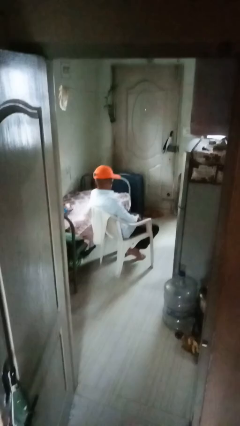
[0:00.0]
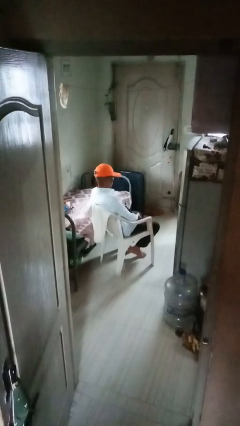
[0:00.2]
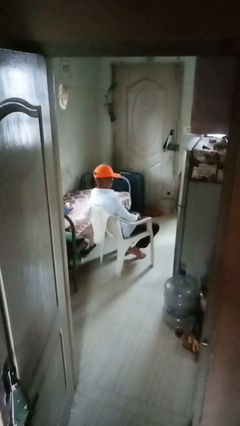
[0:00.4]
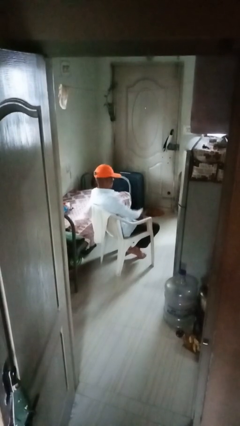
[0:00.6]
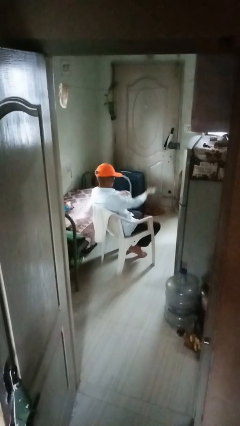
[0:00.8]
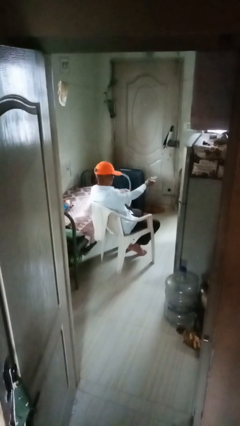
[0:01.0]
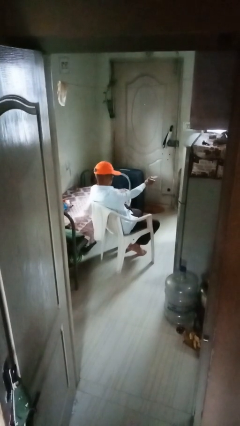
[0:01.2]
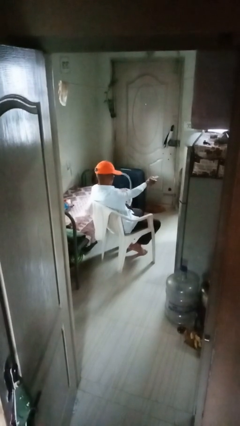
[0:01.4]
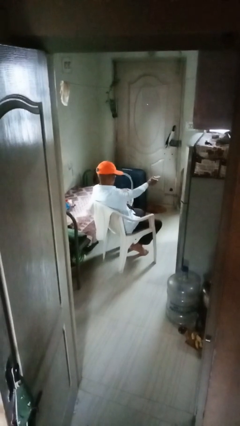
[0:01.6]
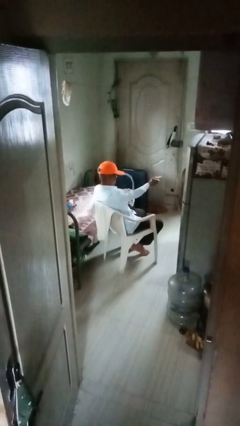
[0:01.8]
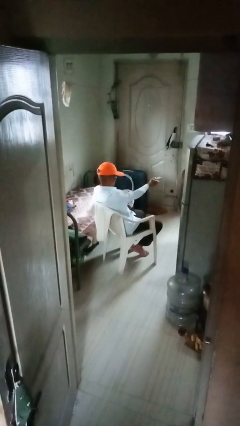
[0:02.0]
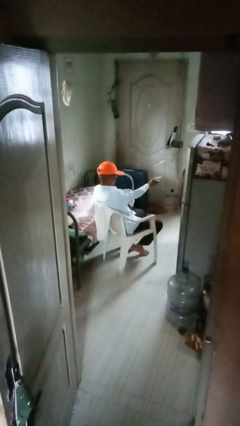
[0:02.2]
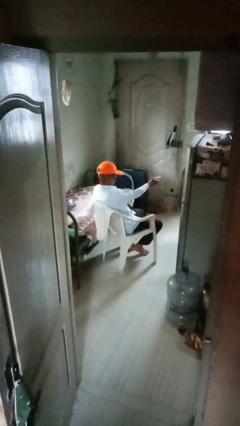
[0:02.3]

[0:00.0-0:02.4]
person uses television remote

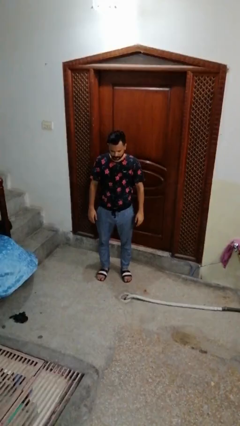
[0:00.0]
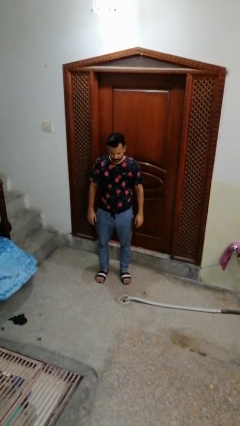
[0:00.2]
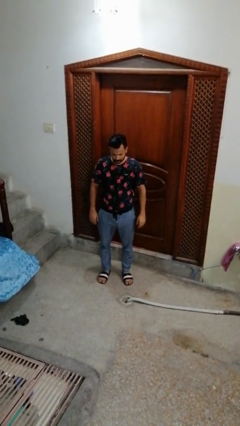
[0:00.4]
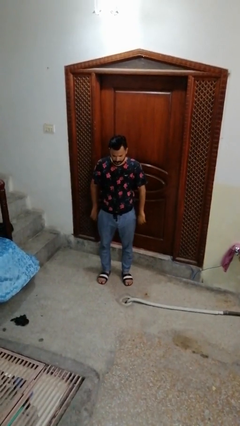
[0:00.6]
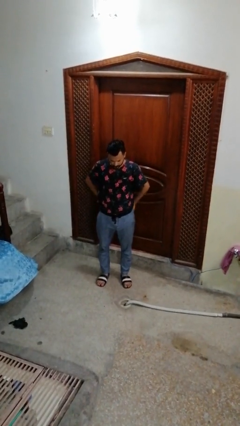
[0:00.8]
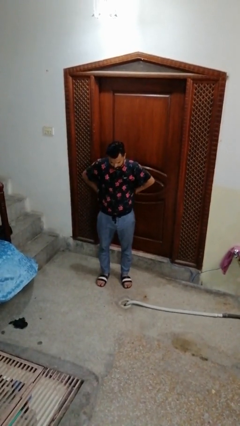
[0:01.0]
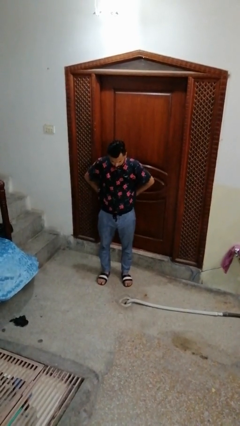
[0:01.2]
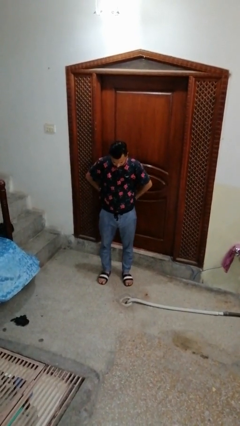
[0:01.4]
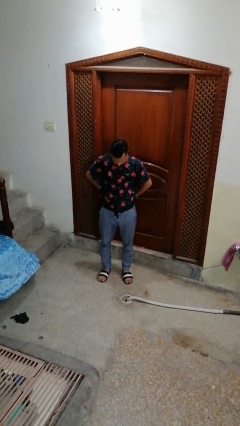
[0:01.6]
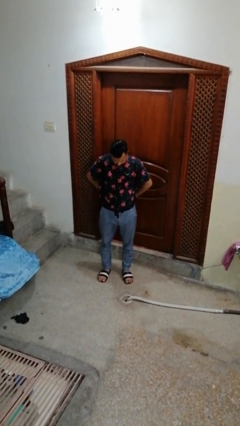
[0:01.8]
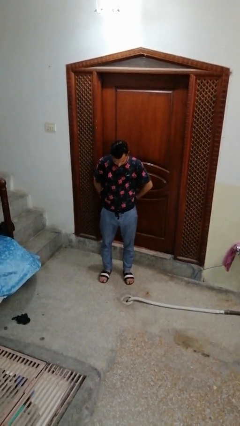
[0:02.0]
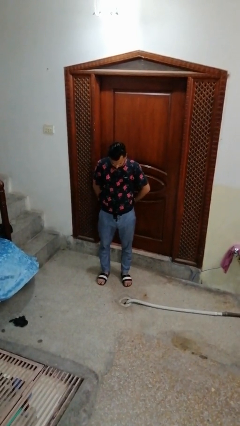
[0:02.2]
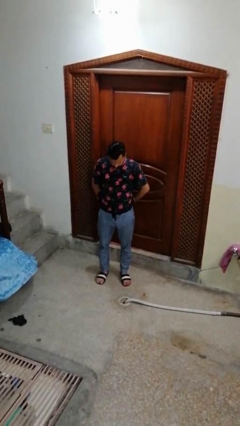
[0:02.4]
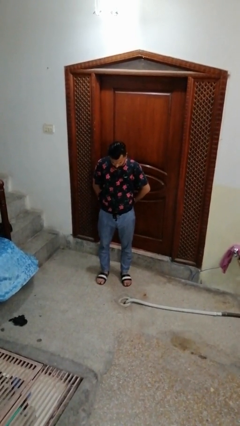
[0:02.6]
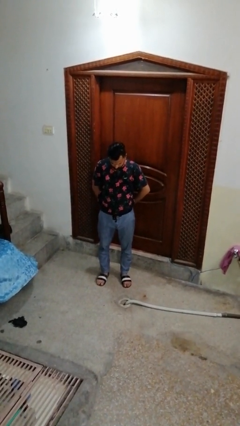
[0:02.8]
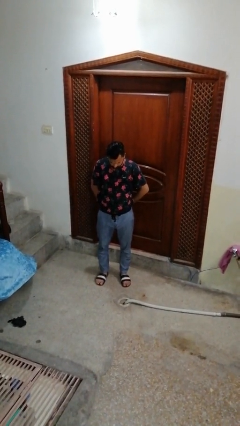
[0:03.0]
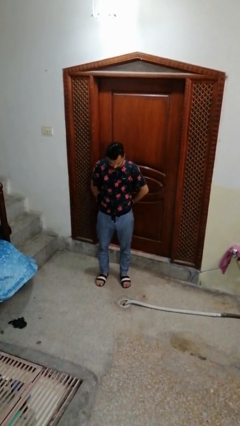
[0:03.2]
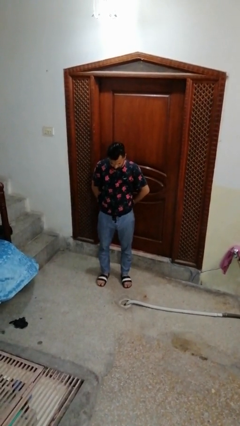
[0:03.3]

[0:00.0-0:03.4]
person puts hands in back pockets

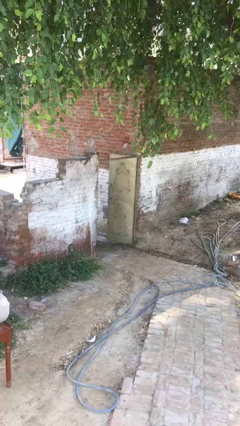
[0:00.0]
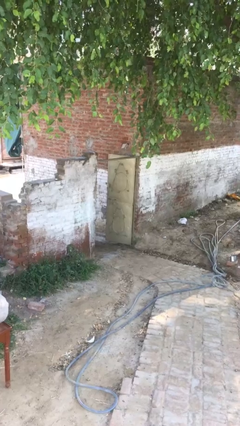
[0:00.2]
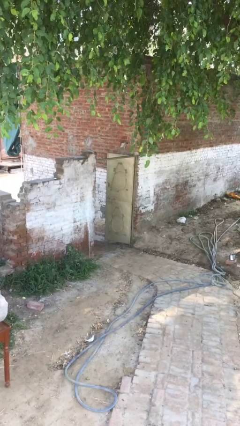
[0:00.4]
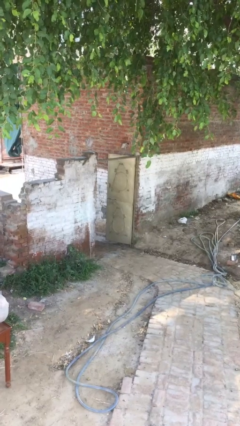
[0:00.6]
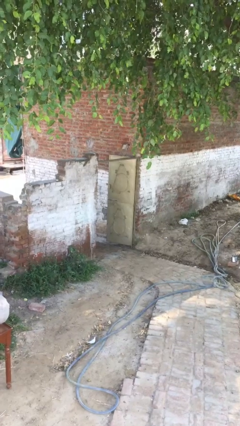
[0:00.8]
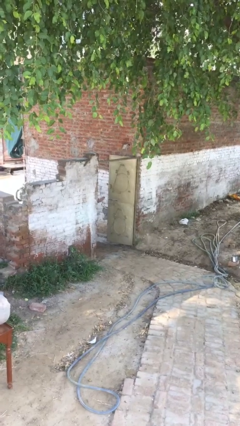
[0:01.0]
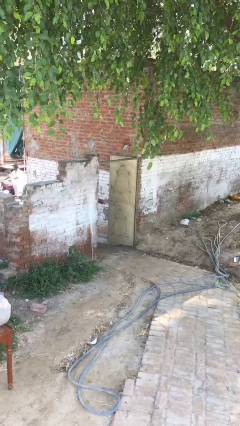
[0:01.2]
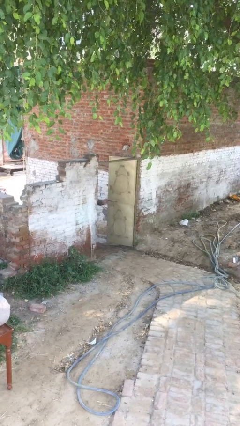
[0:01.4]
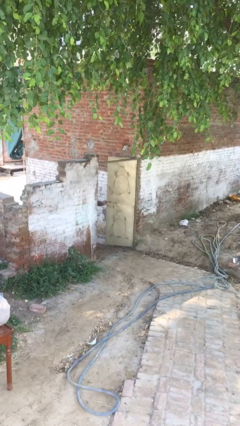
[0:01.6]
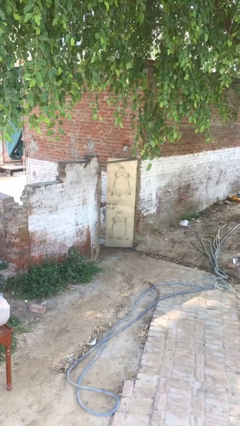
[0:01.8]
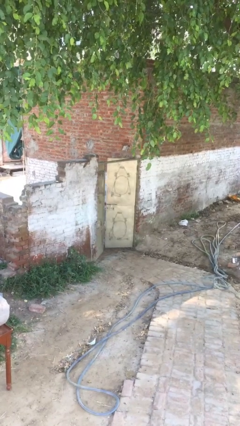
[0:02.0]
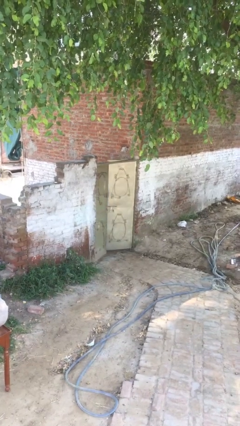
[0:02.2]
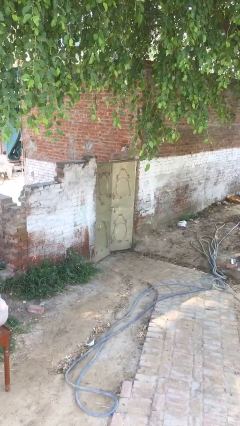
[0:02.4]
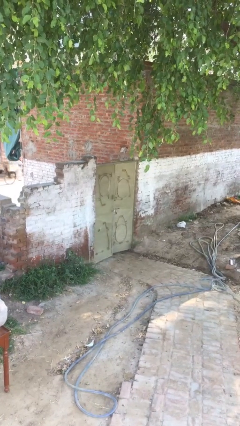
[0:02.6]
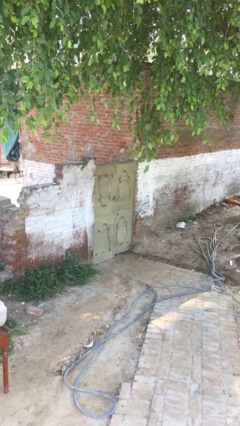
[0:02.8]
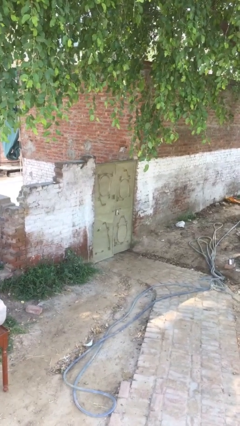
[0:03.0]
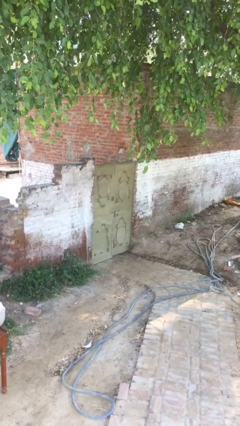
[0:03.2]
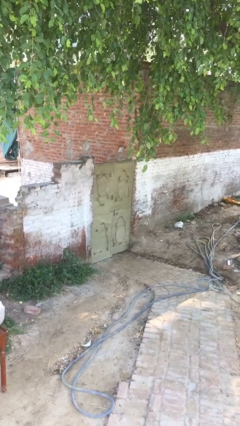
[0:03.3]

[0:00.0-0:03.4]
person closes facility door

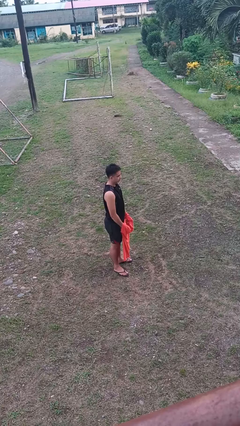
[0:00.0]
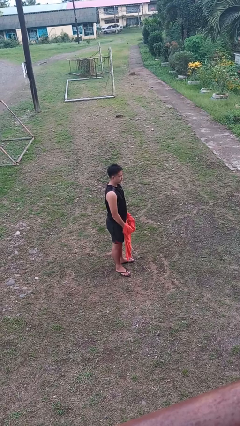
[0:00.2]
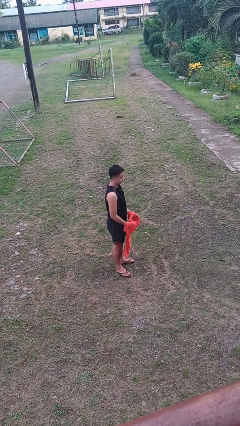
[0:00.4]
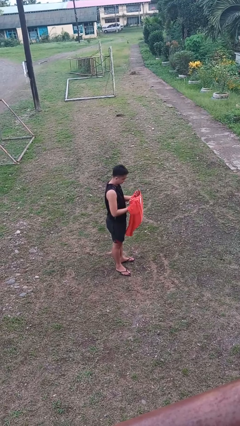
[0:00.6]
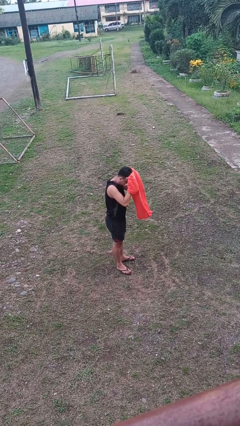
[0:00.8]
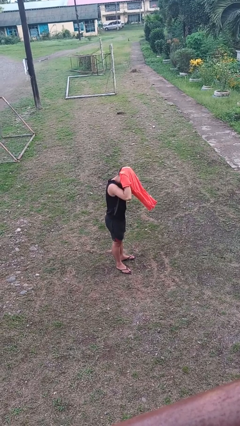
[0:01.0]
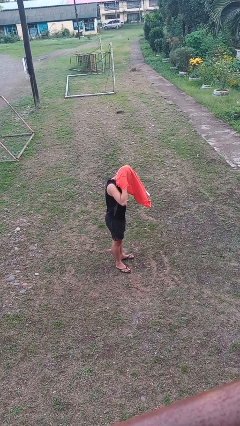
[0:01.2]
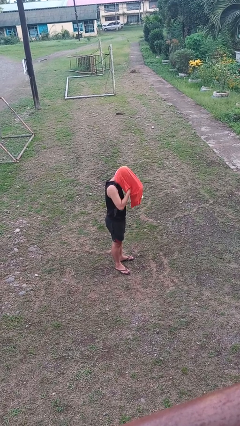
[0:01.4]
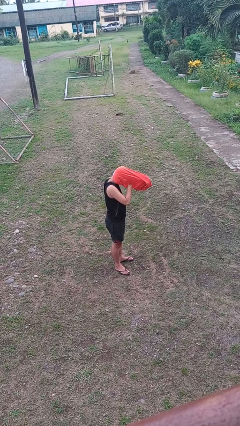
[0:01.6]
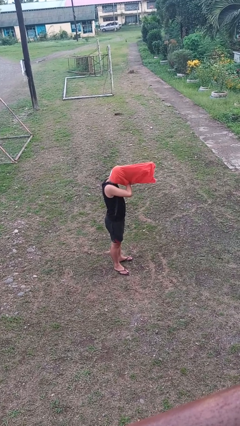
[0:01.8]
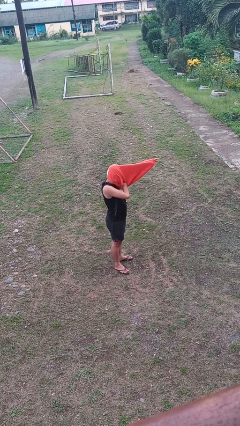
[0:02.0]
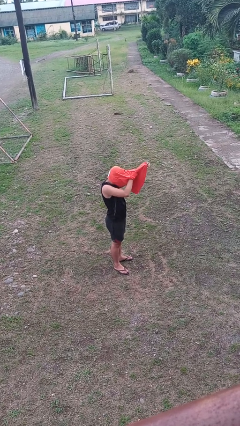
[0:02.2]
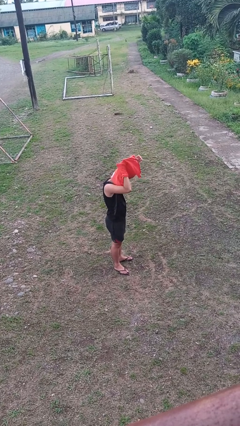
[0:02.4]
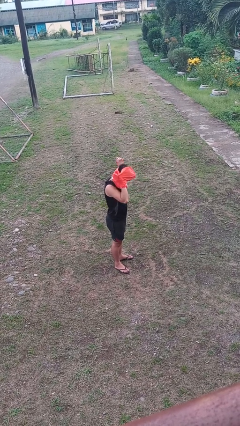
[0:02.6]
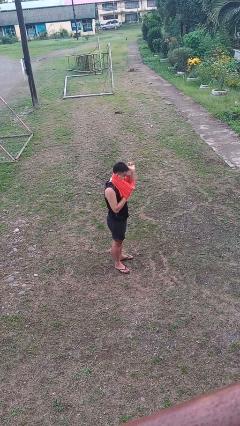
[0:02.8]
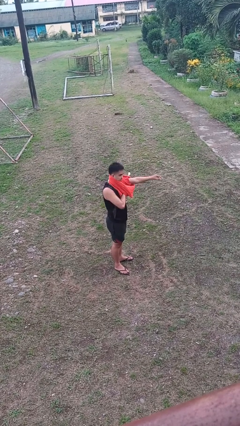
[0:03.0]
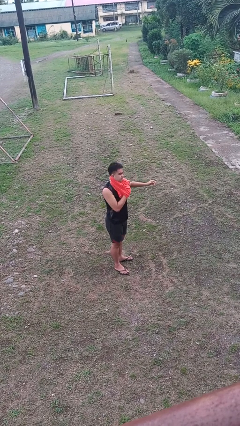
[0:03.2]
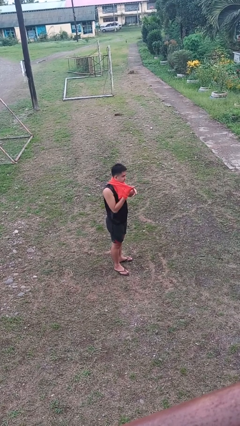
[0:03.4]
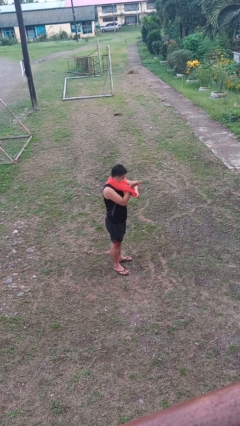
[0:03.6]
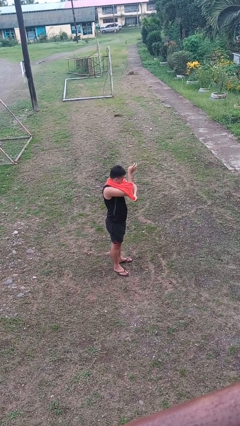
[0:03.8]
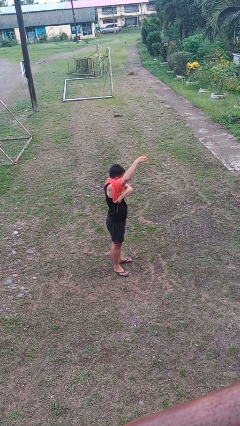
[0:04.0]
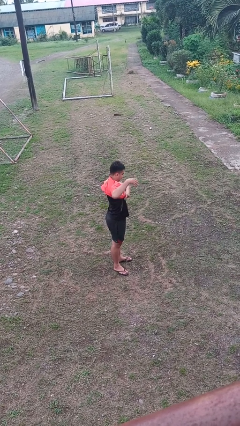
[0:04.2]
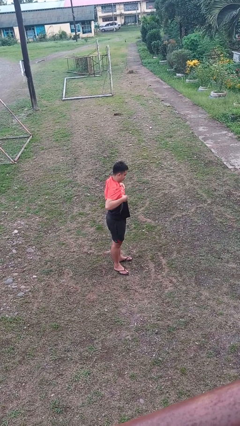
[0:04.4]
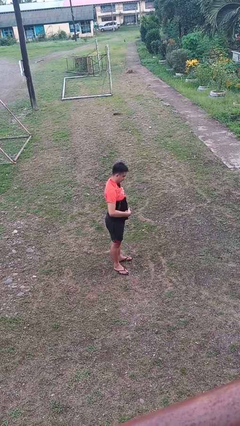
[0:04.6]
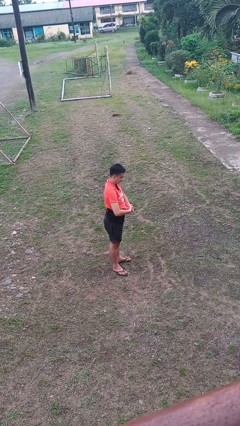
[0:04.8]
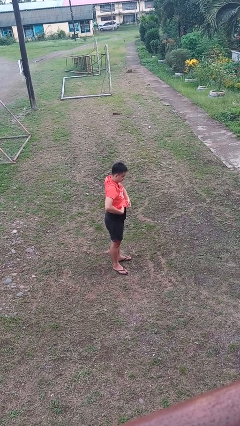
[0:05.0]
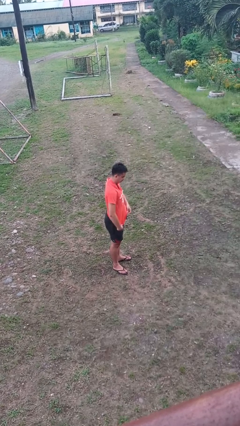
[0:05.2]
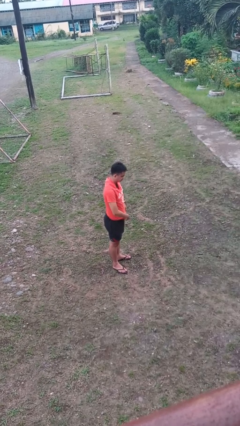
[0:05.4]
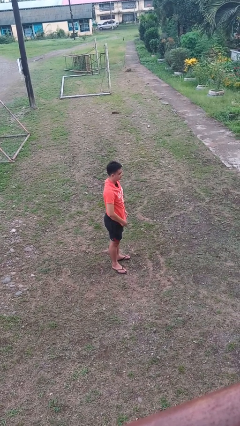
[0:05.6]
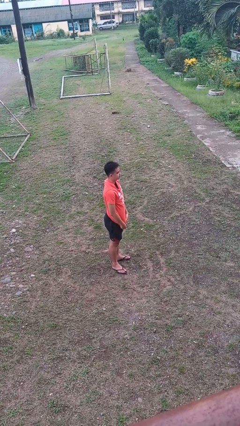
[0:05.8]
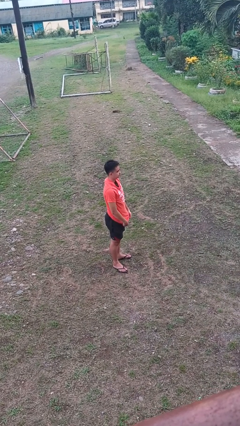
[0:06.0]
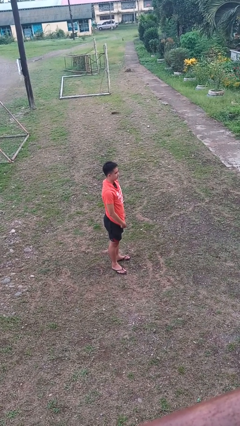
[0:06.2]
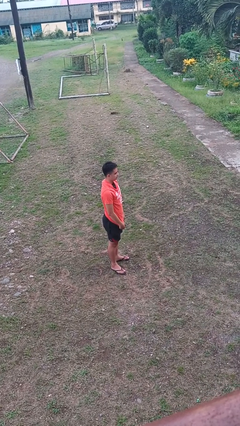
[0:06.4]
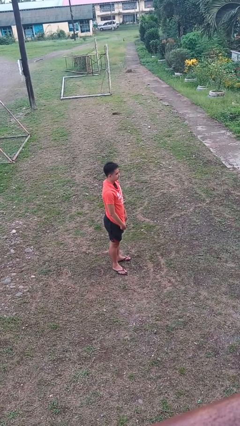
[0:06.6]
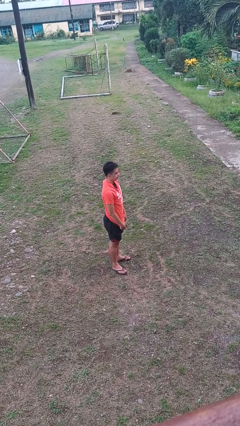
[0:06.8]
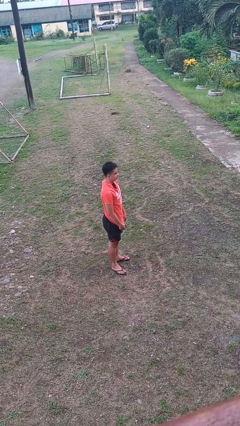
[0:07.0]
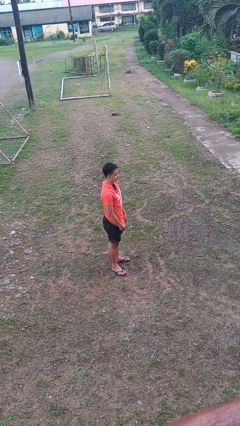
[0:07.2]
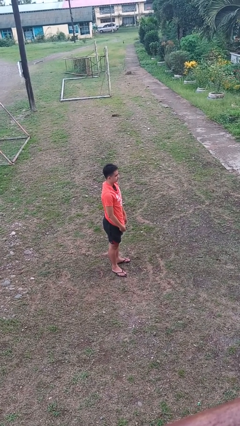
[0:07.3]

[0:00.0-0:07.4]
person puts on shirt

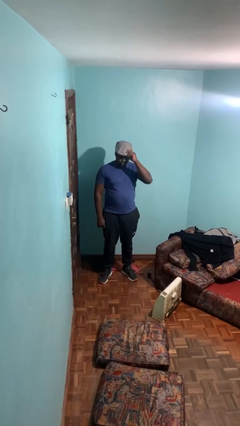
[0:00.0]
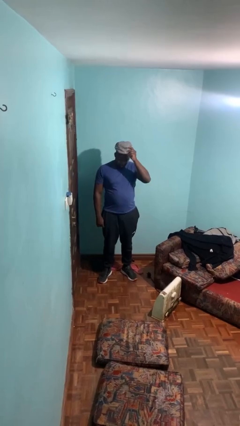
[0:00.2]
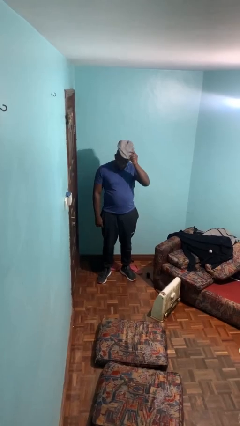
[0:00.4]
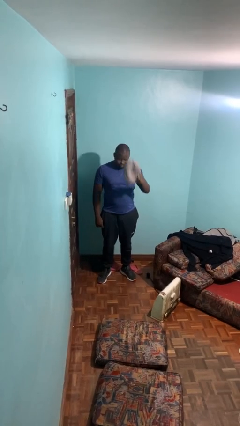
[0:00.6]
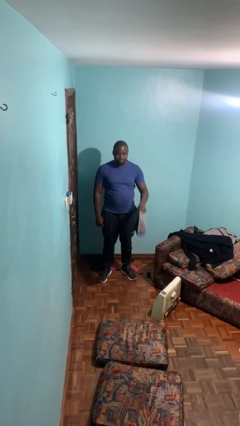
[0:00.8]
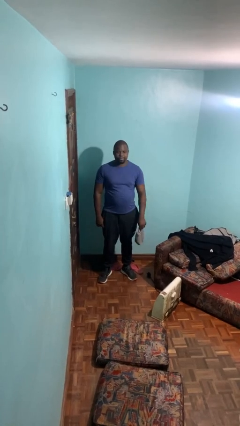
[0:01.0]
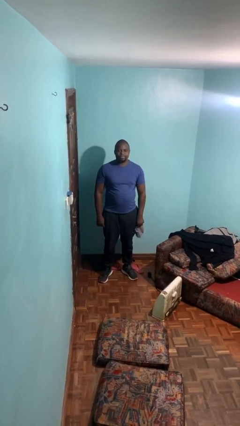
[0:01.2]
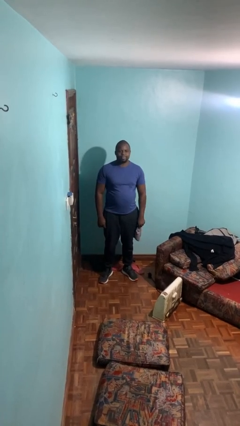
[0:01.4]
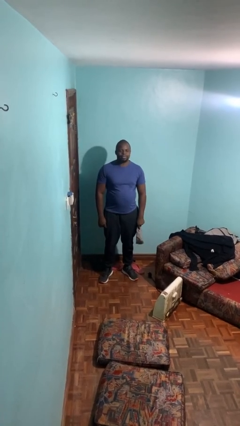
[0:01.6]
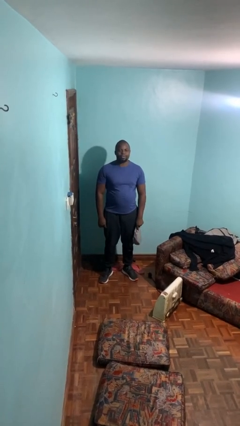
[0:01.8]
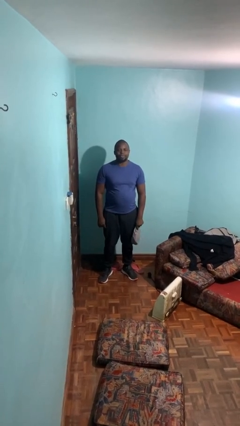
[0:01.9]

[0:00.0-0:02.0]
person takes off hat
